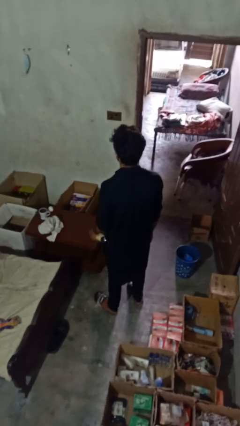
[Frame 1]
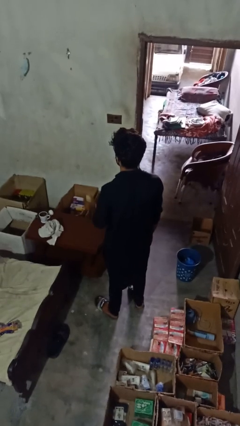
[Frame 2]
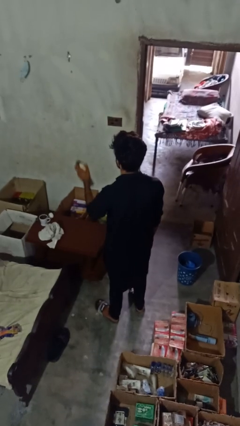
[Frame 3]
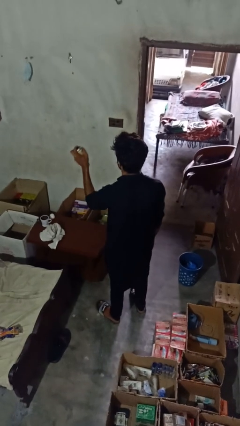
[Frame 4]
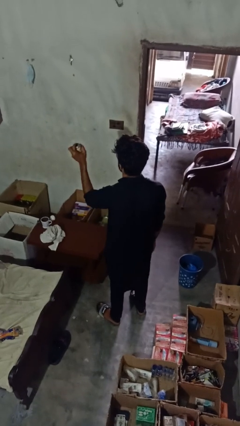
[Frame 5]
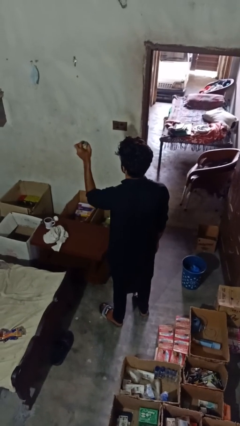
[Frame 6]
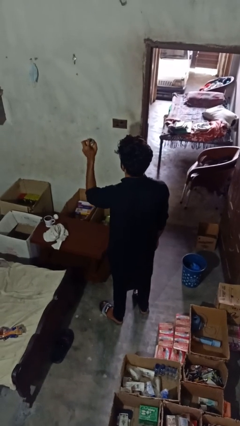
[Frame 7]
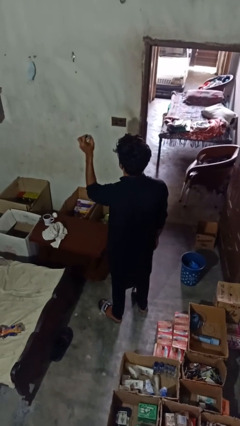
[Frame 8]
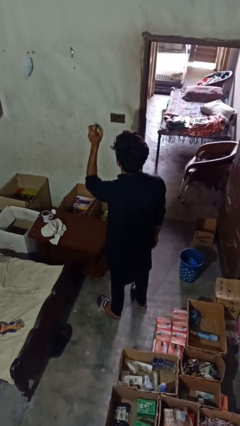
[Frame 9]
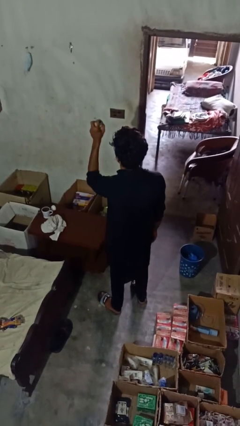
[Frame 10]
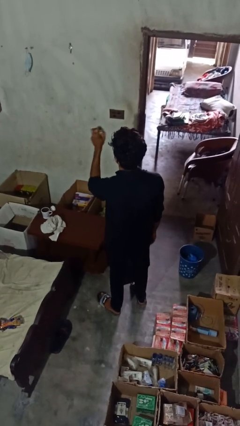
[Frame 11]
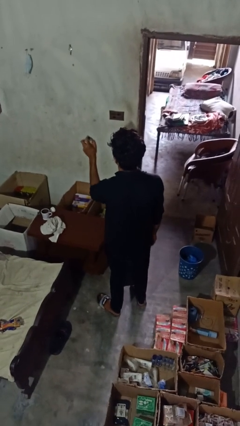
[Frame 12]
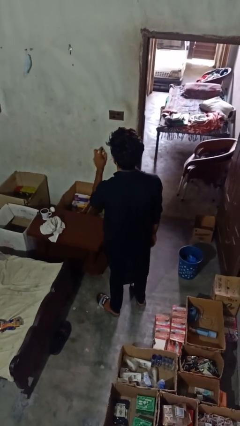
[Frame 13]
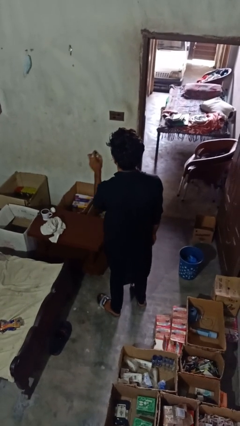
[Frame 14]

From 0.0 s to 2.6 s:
person sprays from bottle

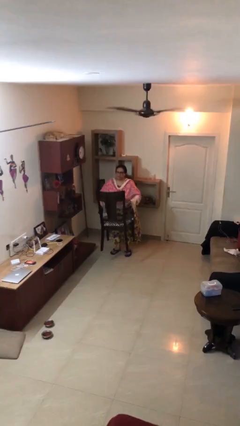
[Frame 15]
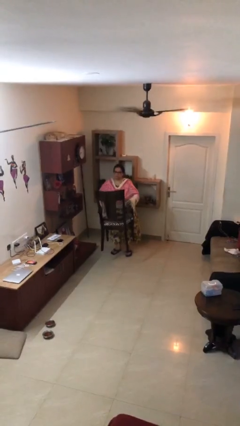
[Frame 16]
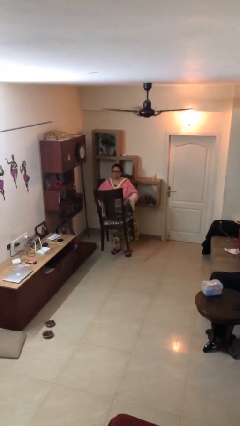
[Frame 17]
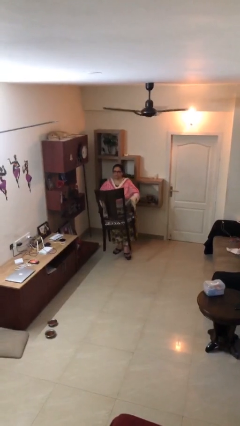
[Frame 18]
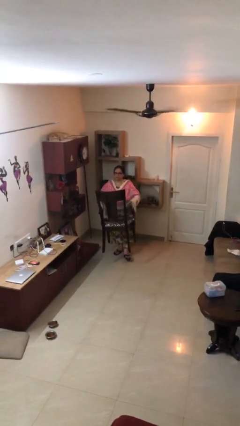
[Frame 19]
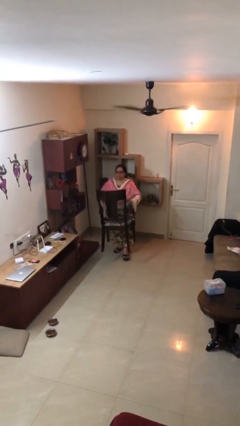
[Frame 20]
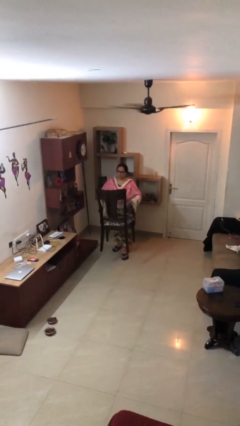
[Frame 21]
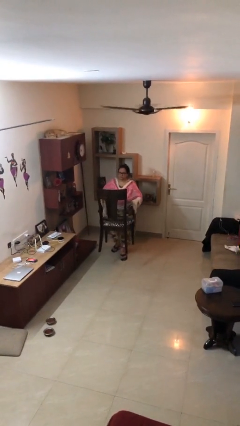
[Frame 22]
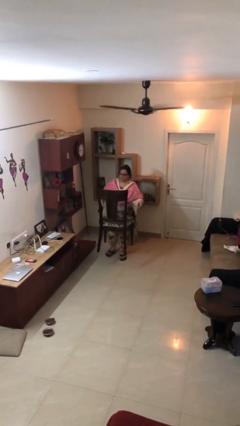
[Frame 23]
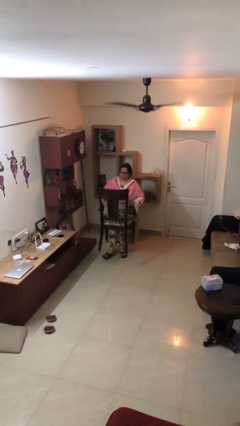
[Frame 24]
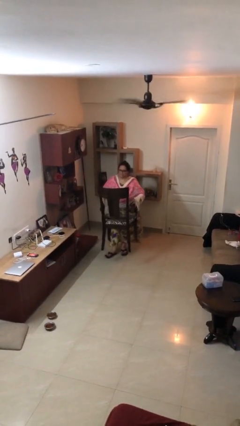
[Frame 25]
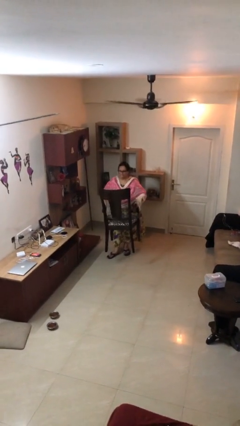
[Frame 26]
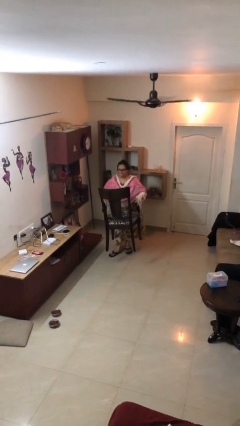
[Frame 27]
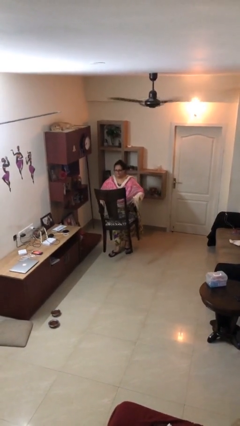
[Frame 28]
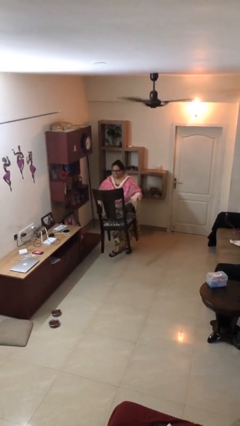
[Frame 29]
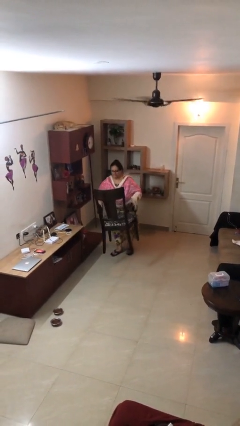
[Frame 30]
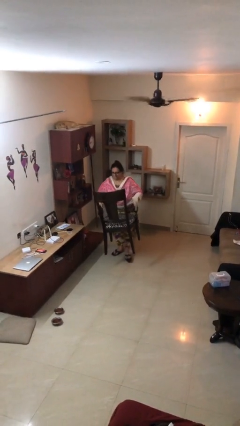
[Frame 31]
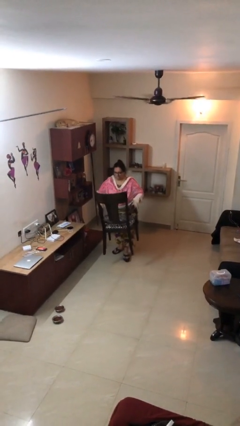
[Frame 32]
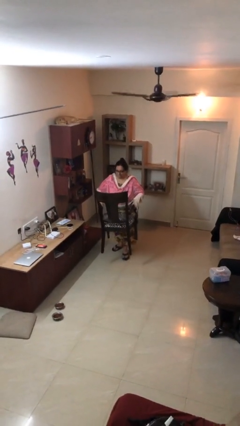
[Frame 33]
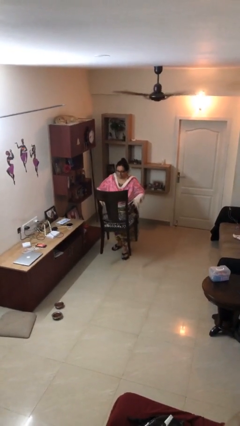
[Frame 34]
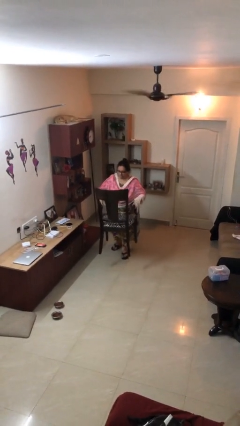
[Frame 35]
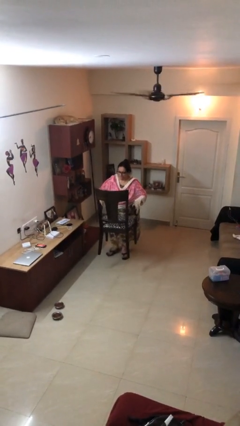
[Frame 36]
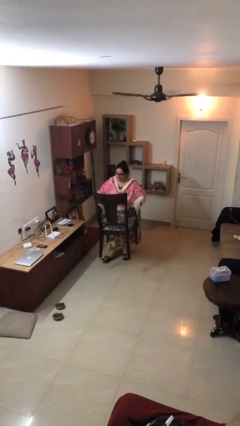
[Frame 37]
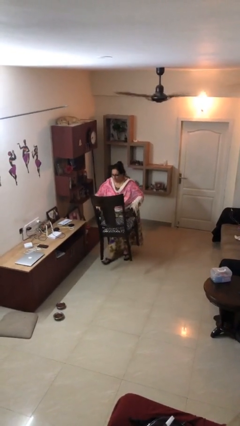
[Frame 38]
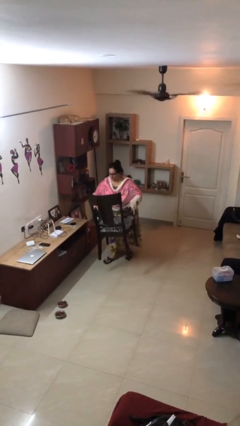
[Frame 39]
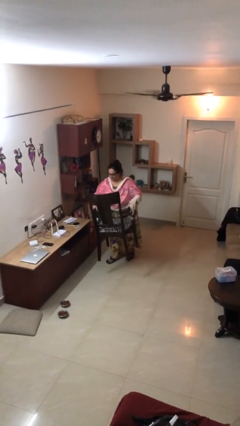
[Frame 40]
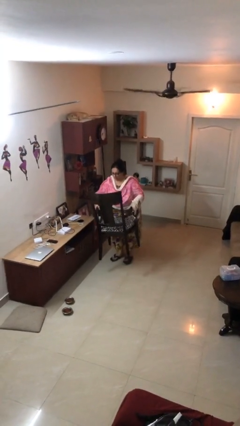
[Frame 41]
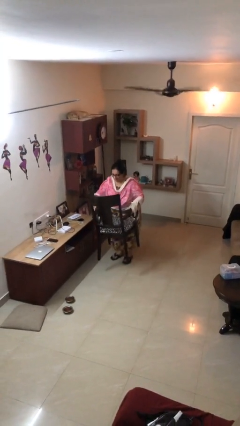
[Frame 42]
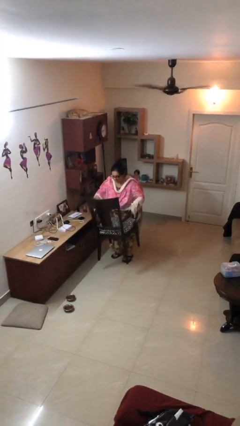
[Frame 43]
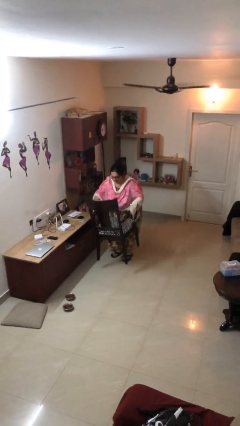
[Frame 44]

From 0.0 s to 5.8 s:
person carries heavy object

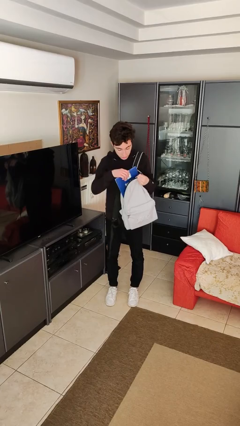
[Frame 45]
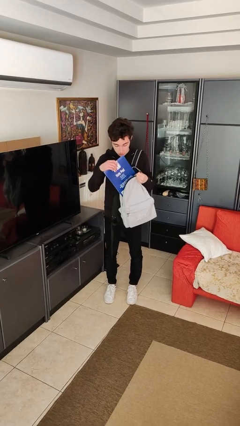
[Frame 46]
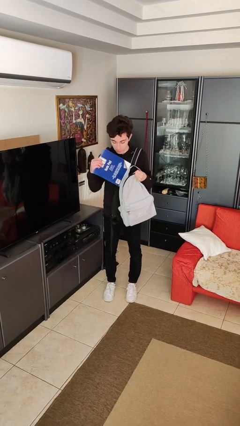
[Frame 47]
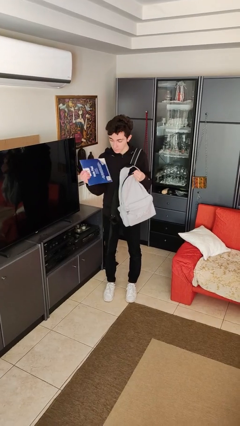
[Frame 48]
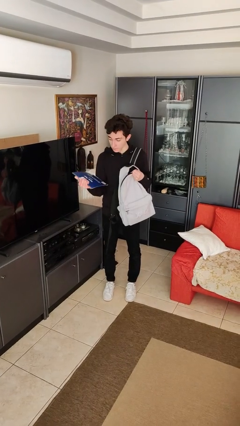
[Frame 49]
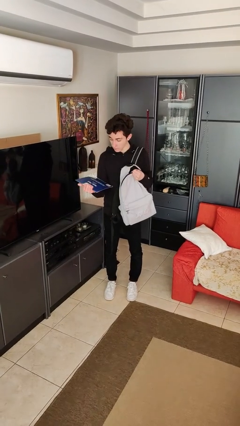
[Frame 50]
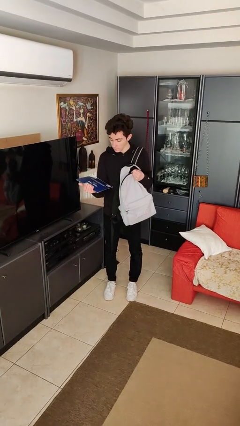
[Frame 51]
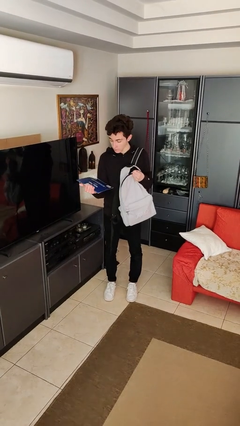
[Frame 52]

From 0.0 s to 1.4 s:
person takes object from backpack

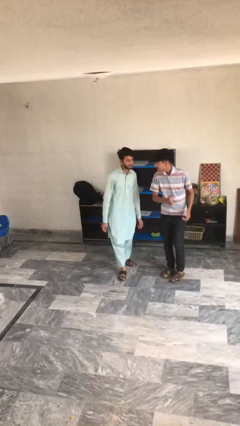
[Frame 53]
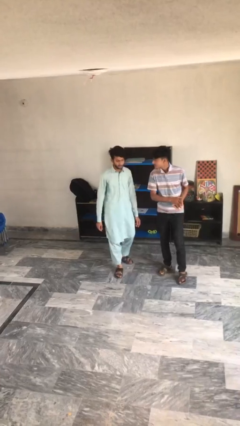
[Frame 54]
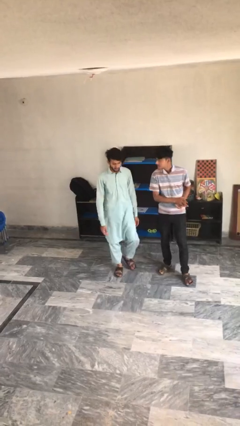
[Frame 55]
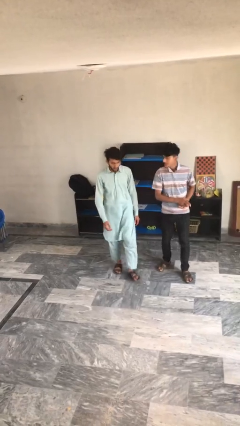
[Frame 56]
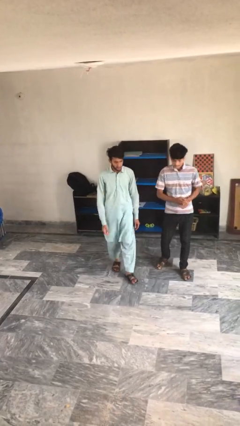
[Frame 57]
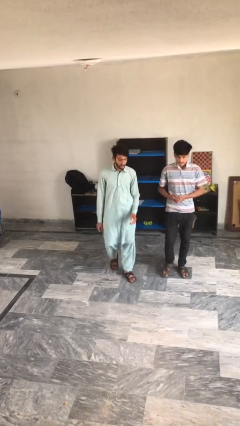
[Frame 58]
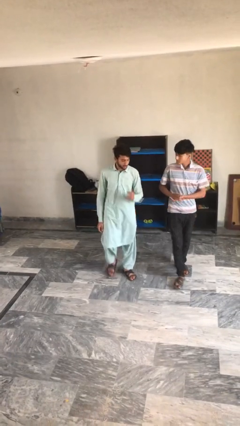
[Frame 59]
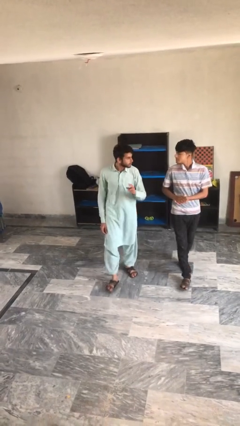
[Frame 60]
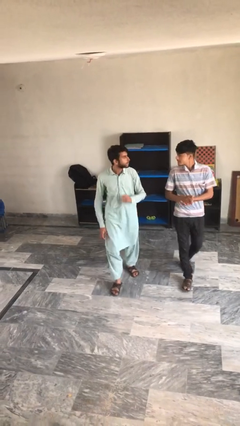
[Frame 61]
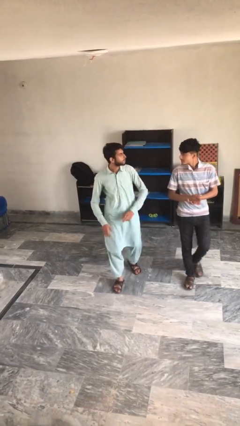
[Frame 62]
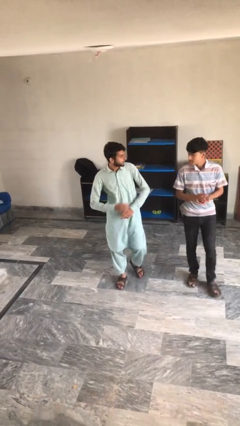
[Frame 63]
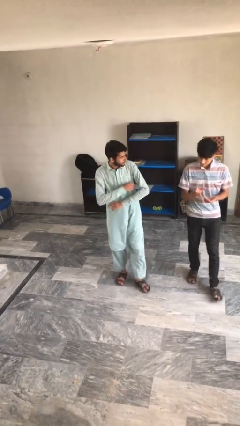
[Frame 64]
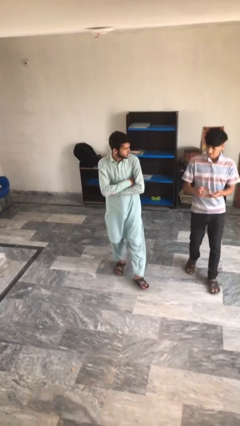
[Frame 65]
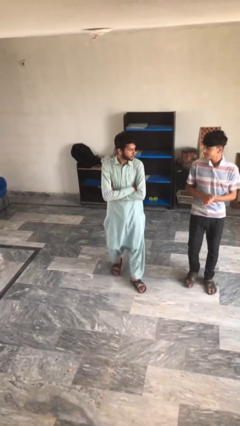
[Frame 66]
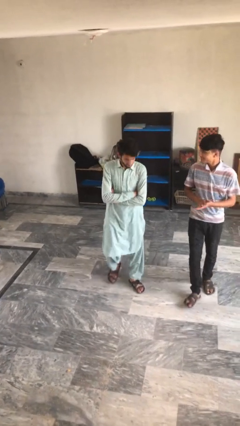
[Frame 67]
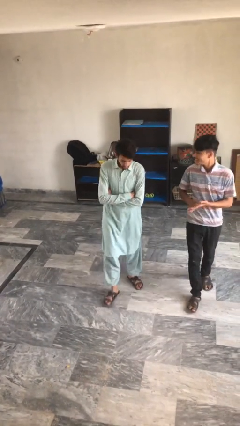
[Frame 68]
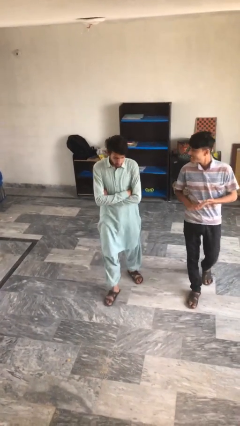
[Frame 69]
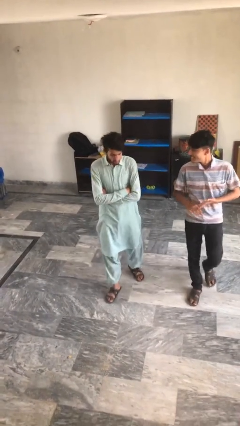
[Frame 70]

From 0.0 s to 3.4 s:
person talks to person

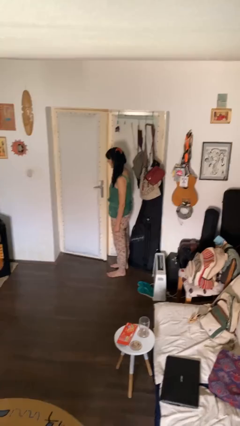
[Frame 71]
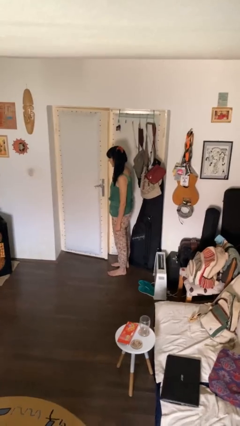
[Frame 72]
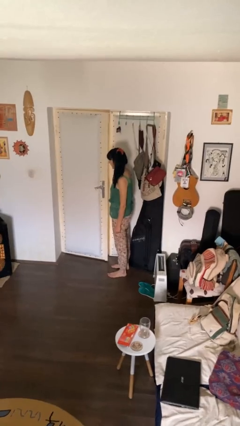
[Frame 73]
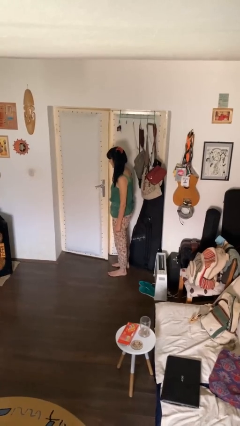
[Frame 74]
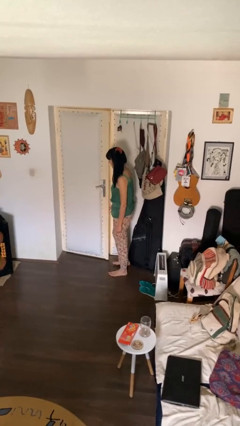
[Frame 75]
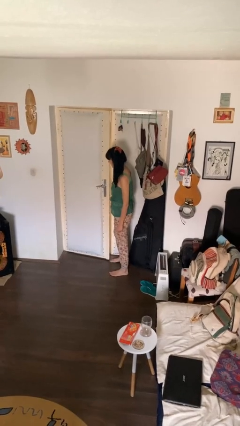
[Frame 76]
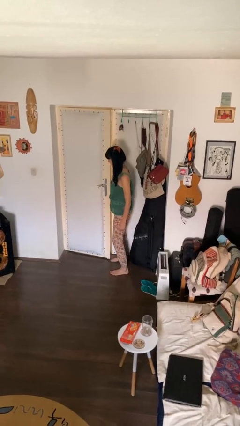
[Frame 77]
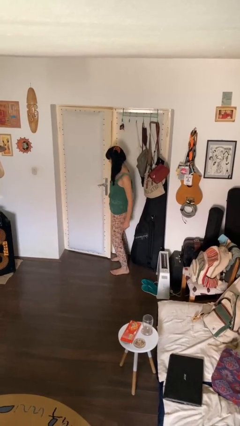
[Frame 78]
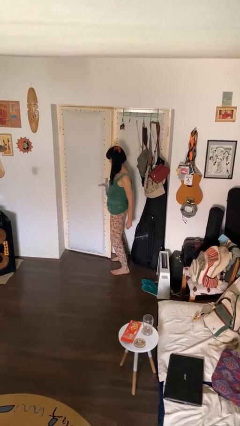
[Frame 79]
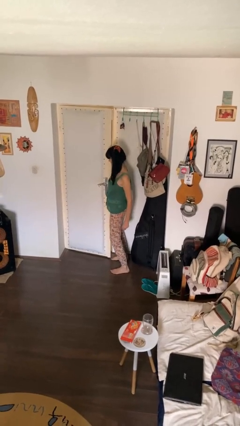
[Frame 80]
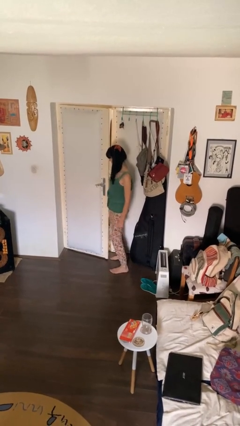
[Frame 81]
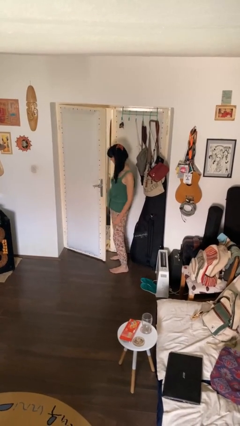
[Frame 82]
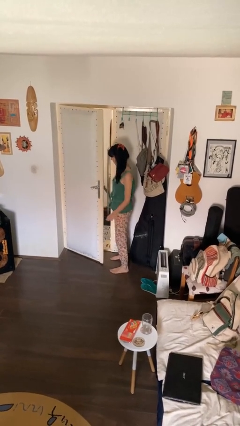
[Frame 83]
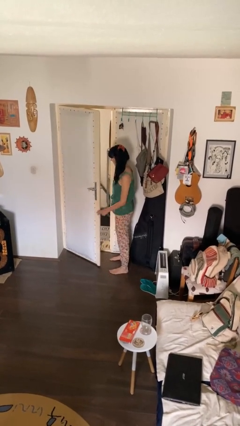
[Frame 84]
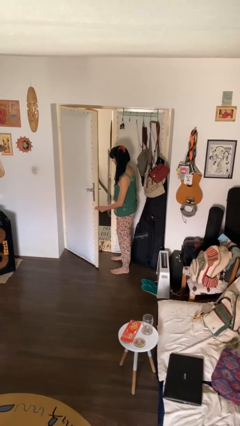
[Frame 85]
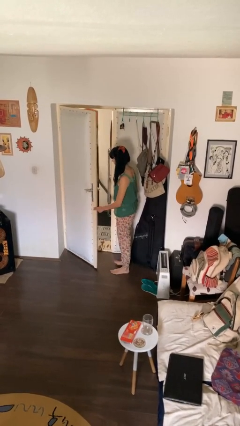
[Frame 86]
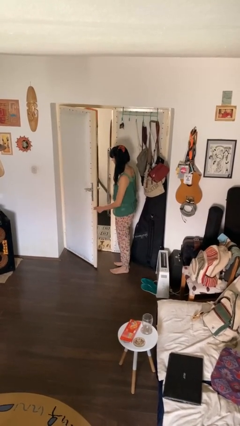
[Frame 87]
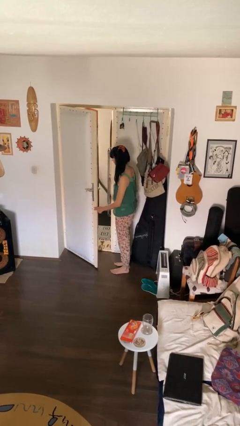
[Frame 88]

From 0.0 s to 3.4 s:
person opens facility door

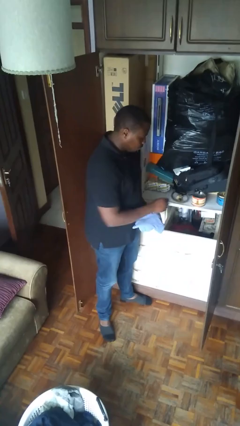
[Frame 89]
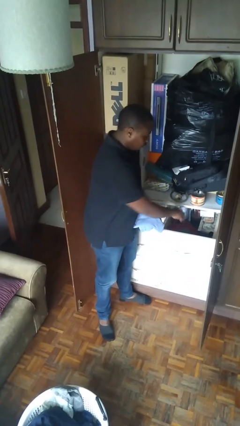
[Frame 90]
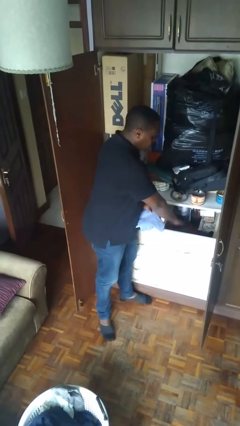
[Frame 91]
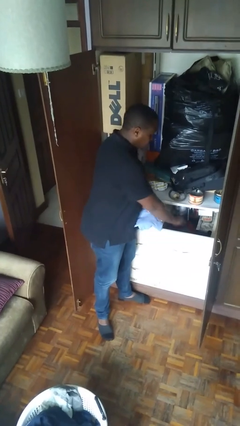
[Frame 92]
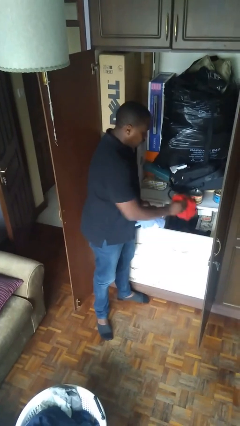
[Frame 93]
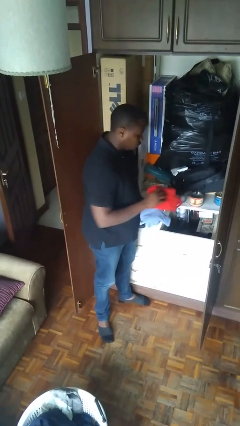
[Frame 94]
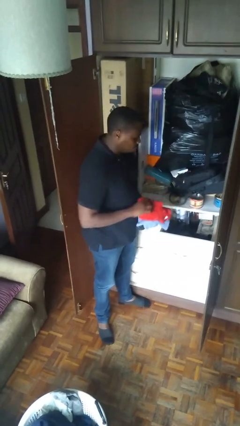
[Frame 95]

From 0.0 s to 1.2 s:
person takes clothes from dresser
